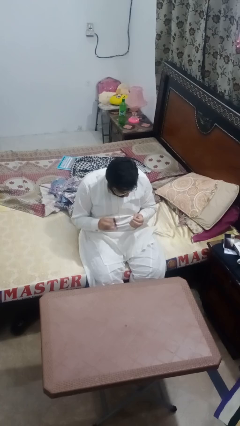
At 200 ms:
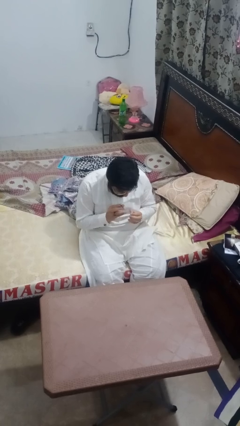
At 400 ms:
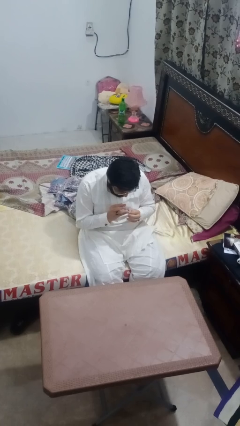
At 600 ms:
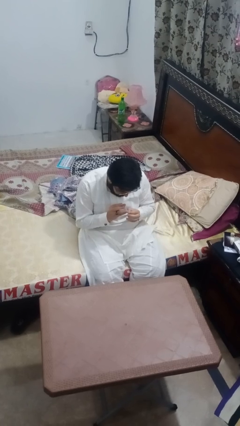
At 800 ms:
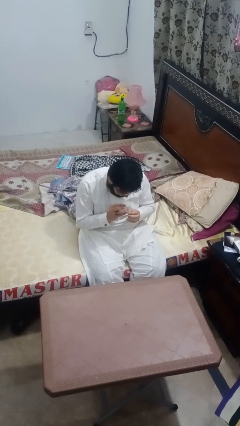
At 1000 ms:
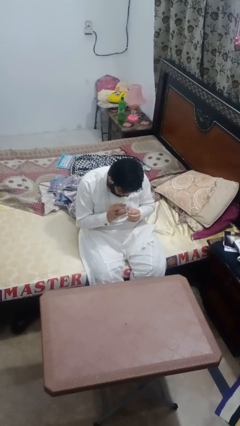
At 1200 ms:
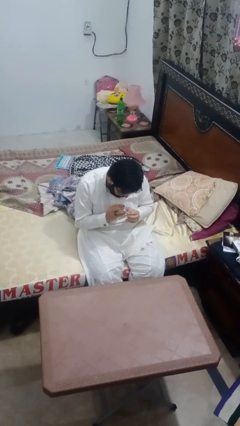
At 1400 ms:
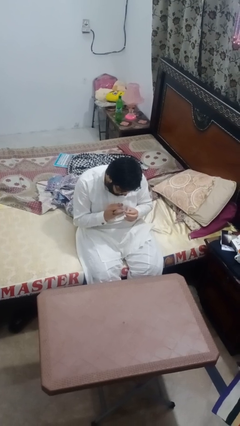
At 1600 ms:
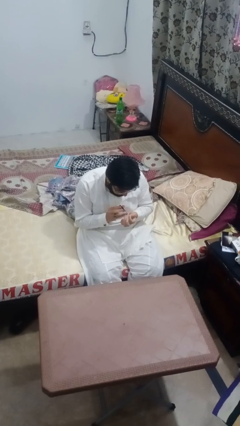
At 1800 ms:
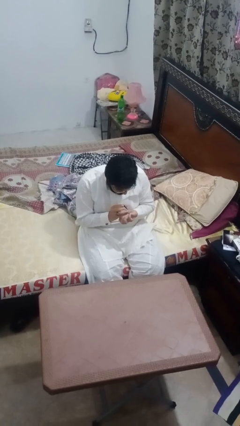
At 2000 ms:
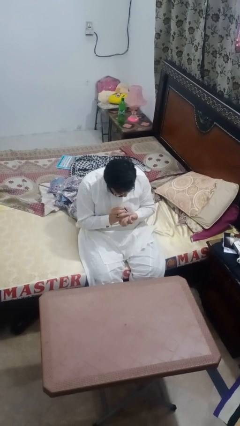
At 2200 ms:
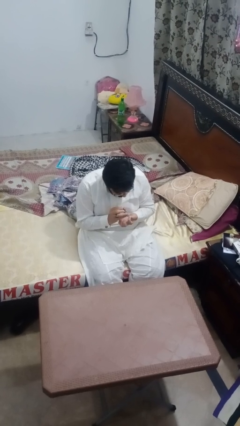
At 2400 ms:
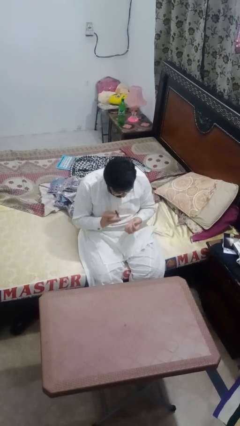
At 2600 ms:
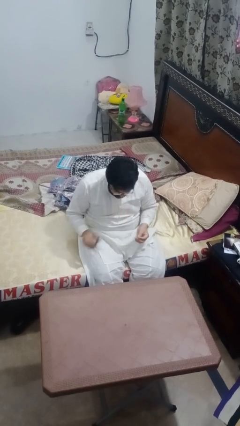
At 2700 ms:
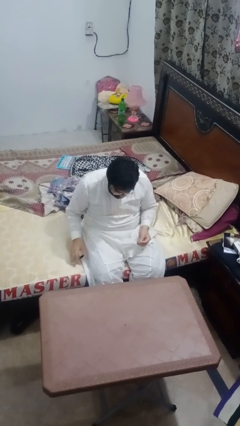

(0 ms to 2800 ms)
person clips fingernails

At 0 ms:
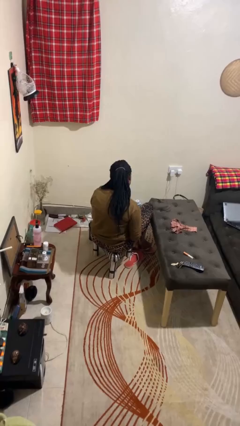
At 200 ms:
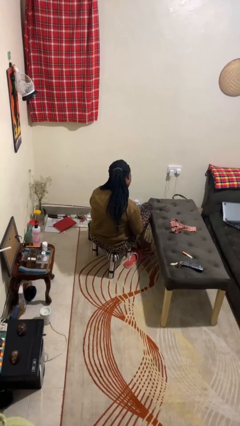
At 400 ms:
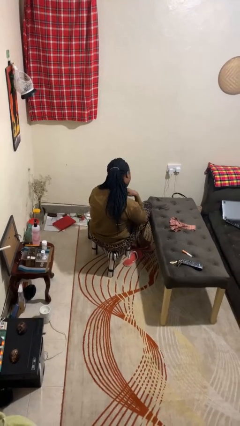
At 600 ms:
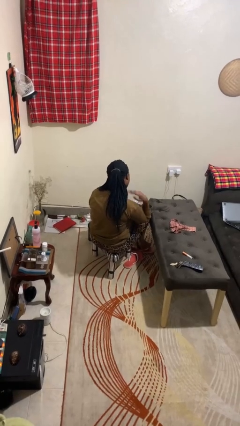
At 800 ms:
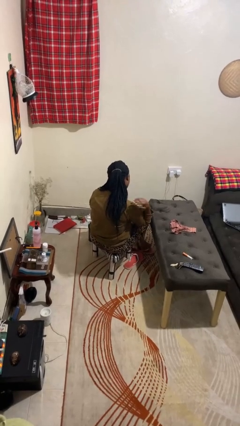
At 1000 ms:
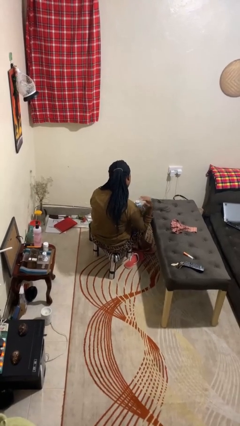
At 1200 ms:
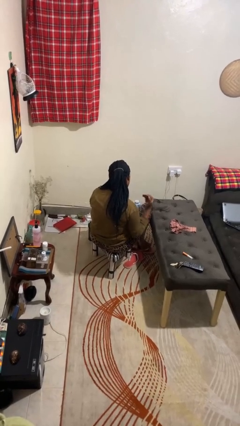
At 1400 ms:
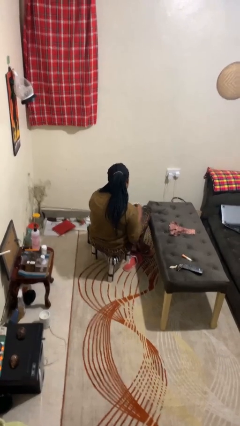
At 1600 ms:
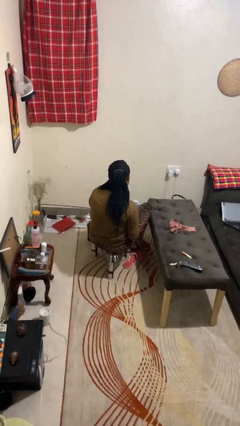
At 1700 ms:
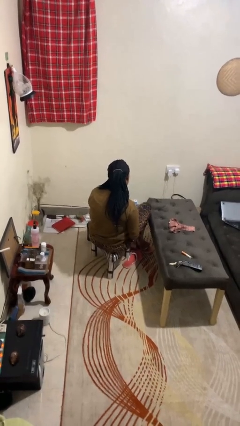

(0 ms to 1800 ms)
person gestures cut

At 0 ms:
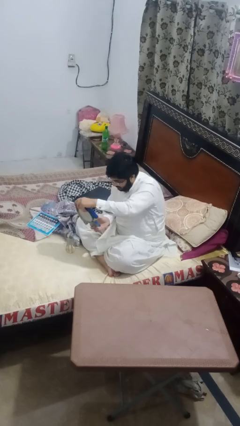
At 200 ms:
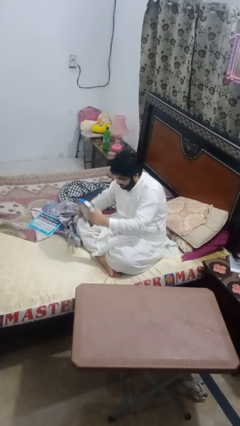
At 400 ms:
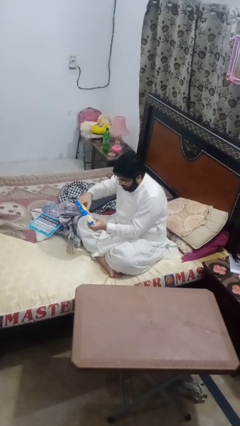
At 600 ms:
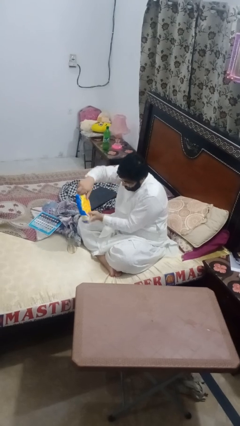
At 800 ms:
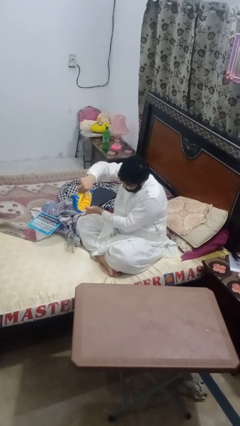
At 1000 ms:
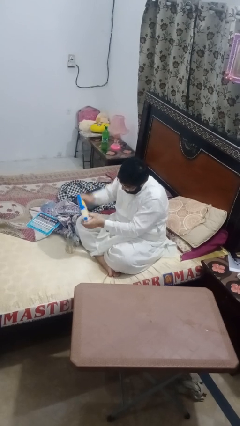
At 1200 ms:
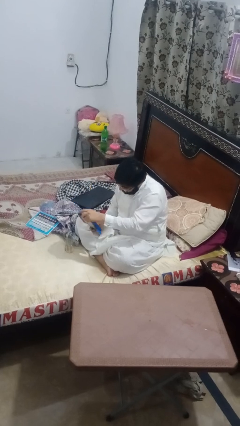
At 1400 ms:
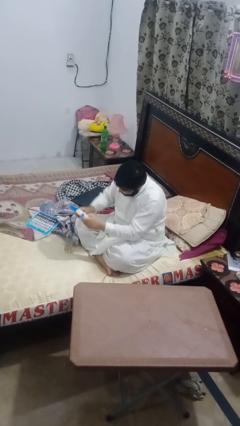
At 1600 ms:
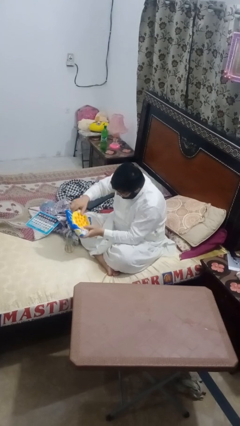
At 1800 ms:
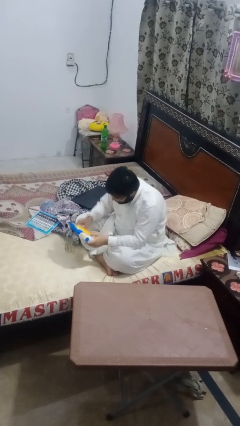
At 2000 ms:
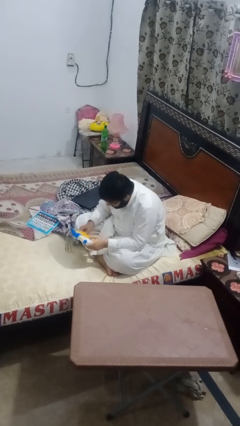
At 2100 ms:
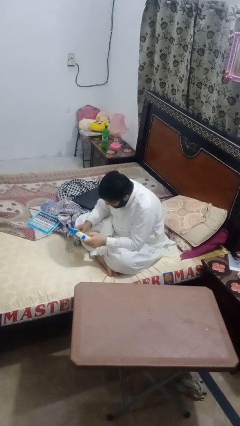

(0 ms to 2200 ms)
person interacts with handheld game

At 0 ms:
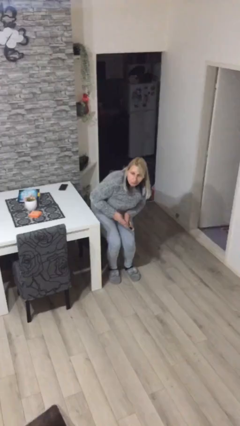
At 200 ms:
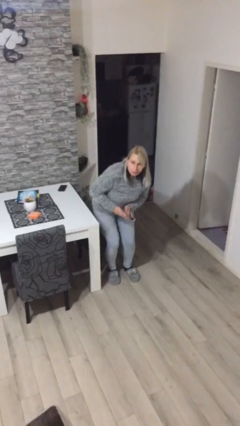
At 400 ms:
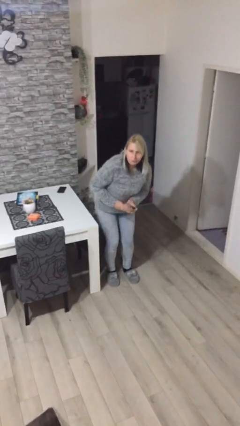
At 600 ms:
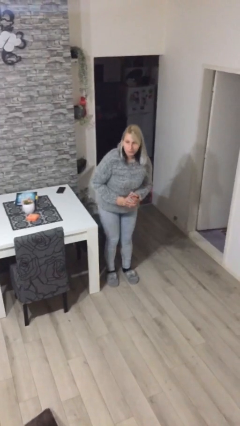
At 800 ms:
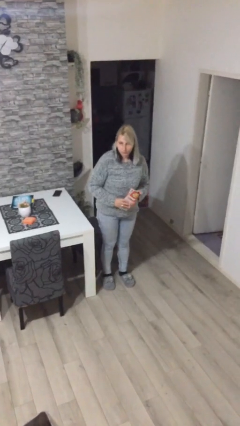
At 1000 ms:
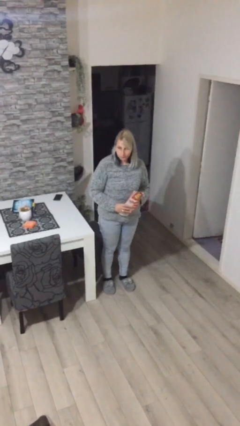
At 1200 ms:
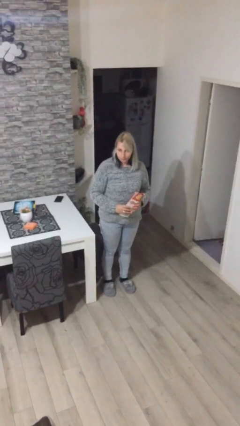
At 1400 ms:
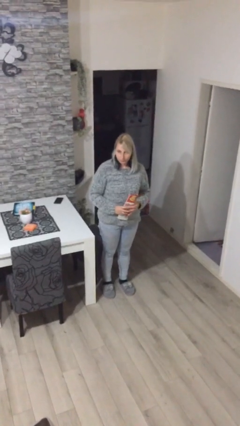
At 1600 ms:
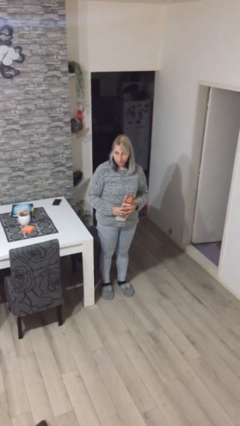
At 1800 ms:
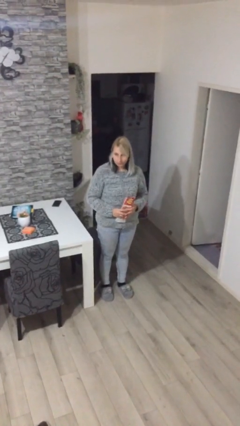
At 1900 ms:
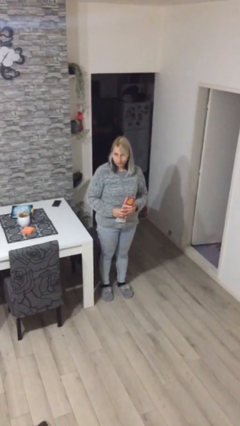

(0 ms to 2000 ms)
person stands up

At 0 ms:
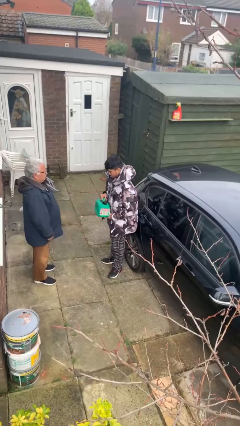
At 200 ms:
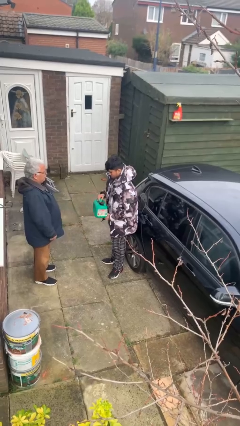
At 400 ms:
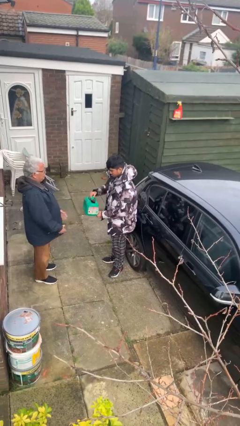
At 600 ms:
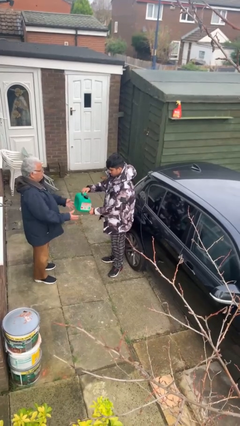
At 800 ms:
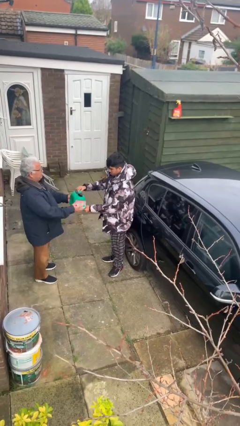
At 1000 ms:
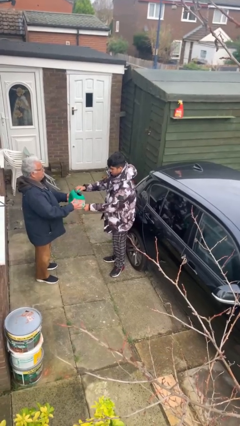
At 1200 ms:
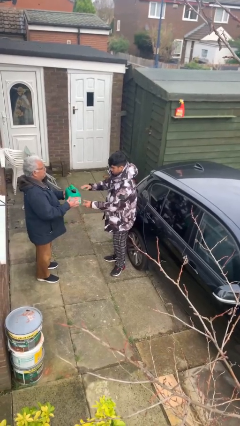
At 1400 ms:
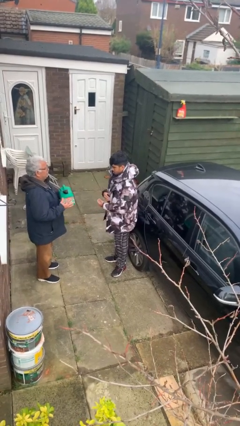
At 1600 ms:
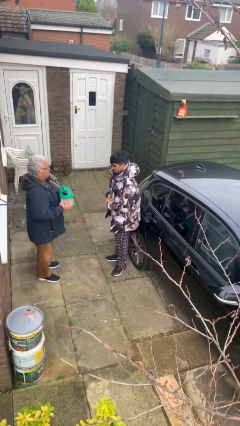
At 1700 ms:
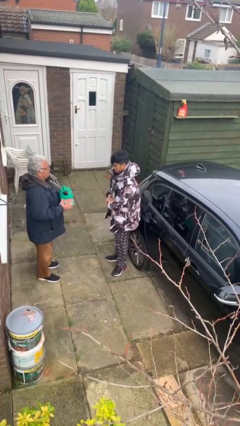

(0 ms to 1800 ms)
person transfers object to person

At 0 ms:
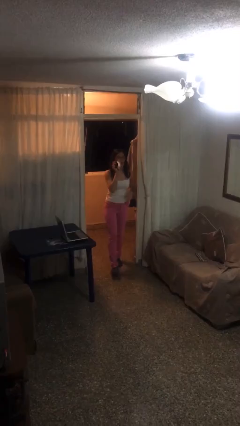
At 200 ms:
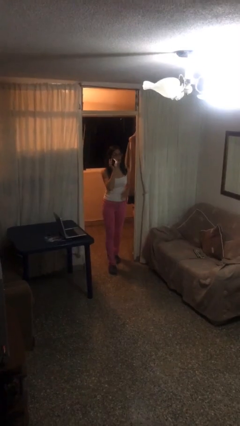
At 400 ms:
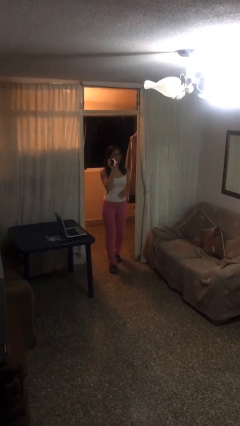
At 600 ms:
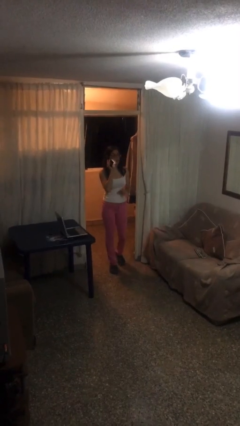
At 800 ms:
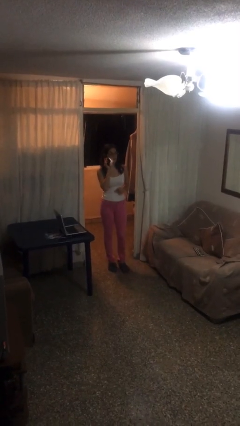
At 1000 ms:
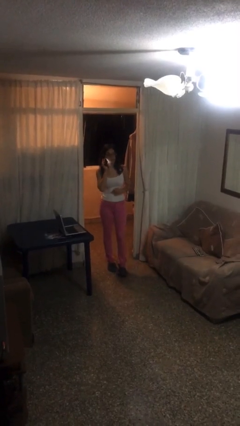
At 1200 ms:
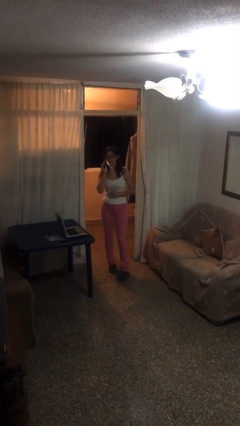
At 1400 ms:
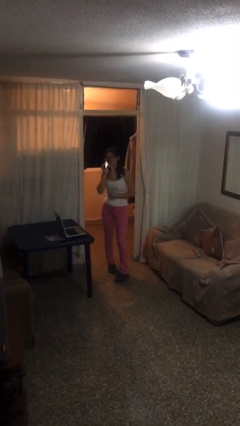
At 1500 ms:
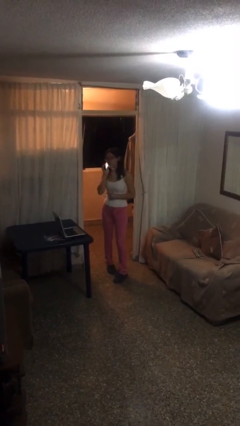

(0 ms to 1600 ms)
person talks on phone

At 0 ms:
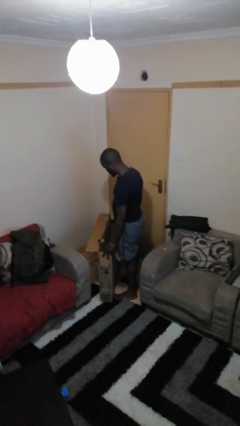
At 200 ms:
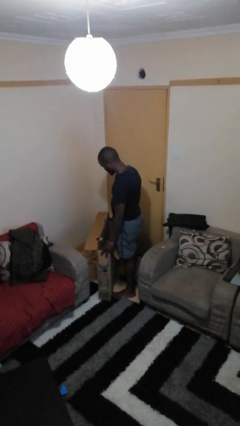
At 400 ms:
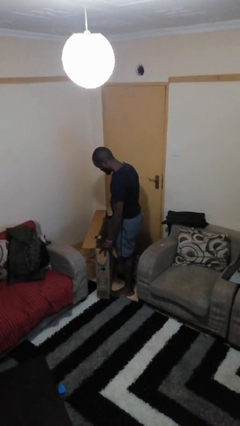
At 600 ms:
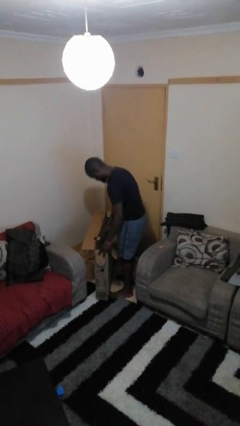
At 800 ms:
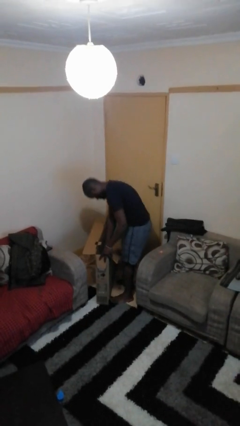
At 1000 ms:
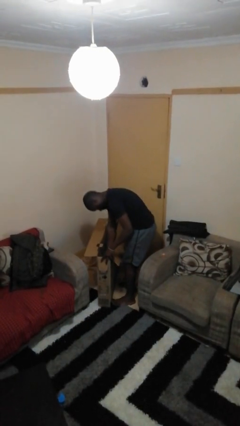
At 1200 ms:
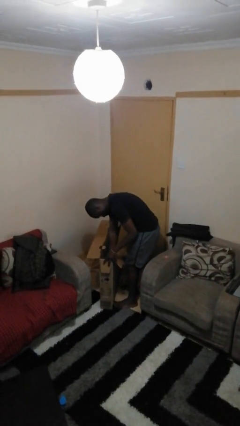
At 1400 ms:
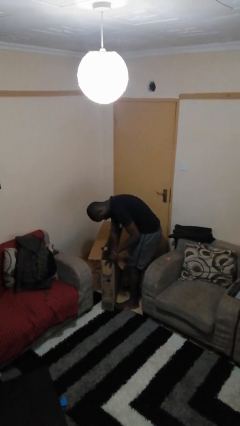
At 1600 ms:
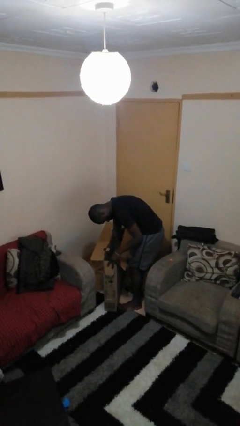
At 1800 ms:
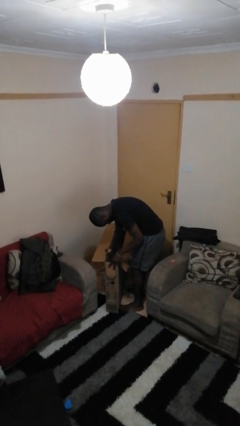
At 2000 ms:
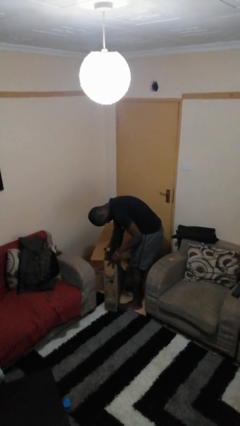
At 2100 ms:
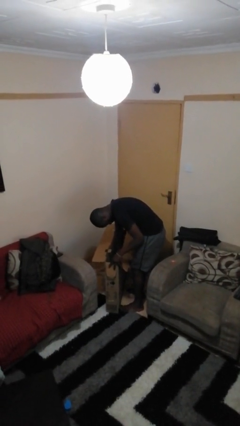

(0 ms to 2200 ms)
person searches in box

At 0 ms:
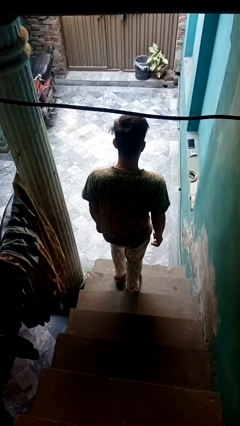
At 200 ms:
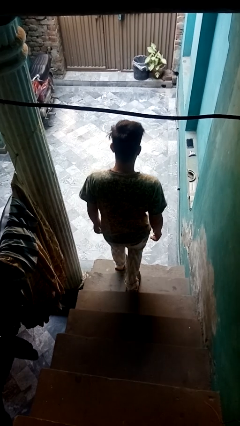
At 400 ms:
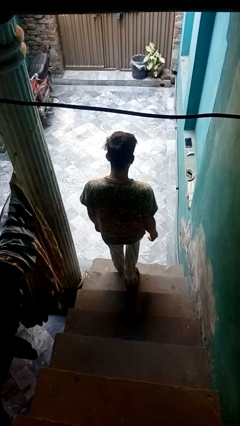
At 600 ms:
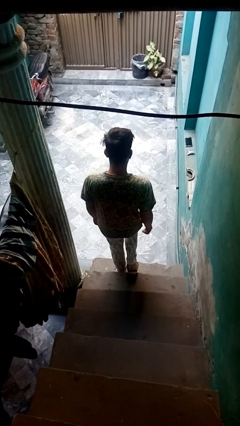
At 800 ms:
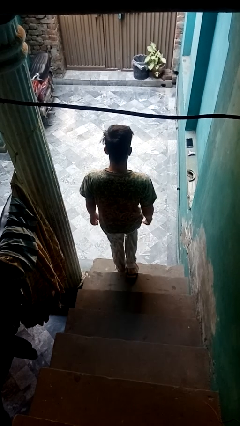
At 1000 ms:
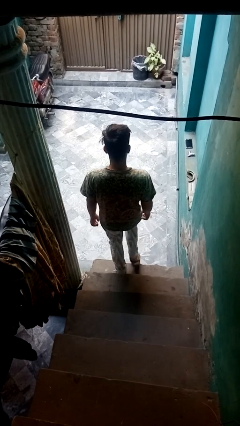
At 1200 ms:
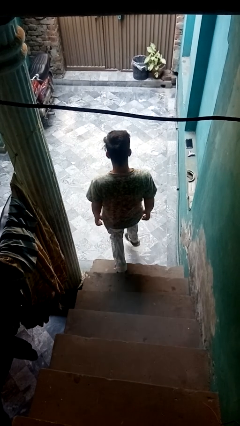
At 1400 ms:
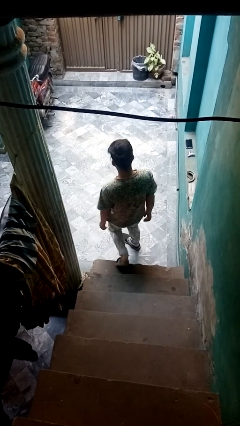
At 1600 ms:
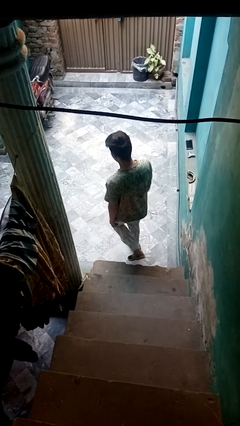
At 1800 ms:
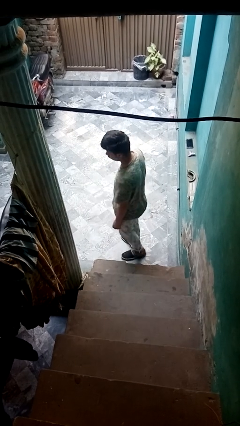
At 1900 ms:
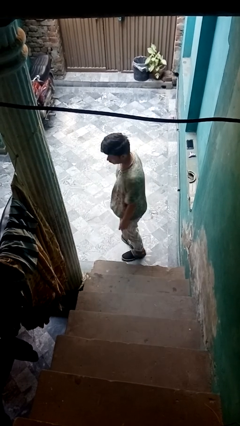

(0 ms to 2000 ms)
person climbs down stairs

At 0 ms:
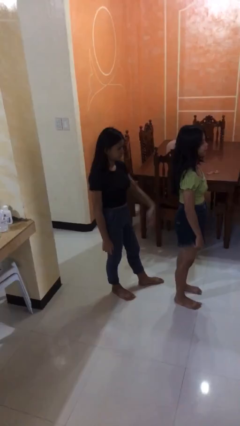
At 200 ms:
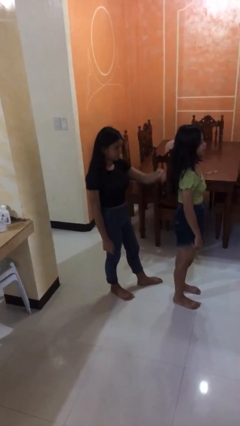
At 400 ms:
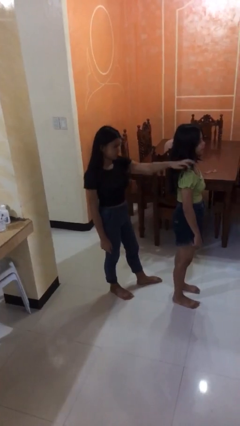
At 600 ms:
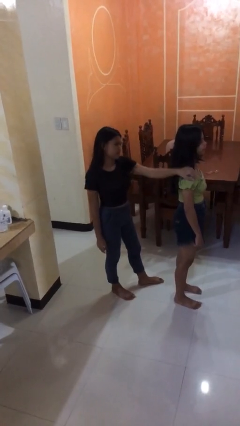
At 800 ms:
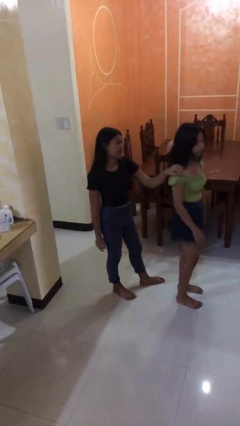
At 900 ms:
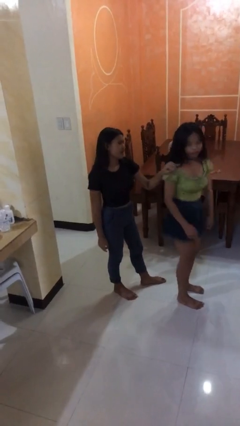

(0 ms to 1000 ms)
person grabs person by shoulder
